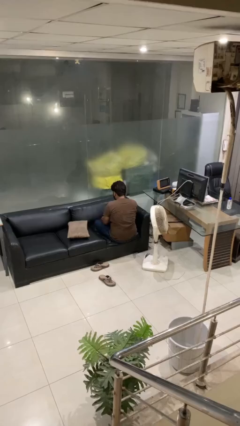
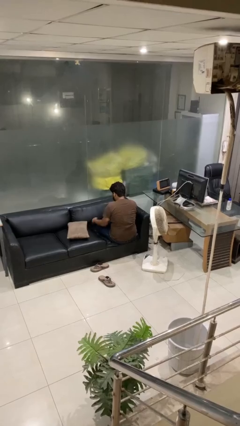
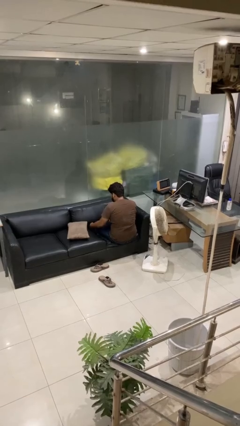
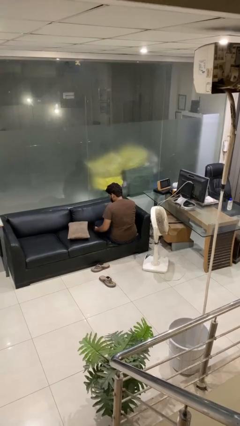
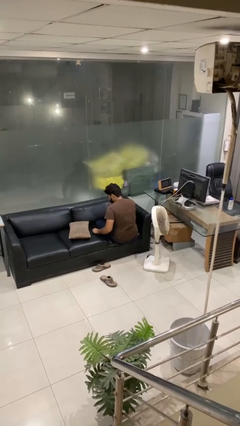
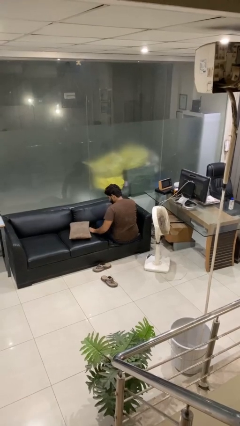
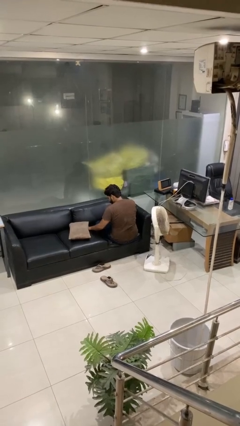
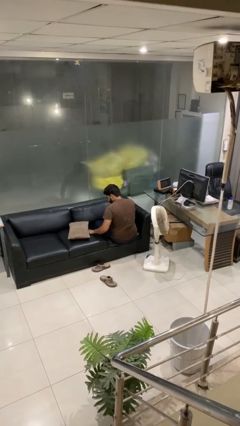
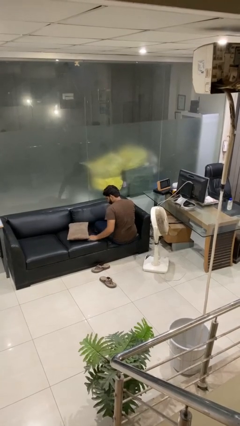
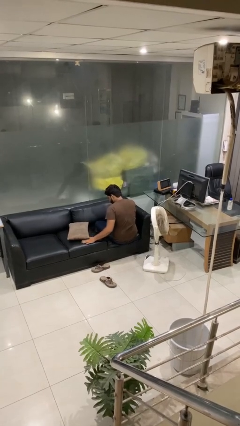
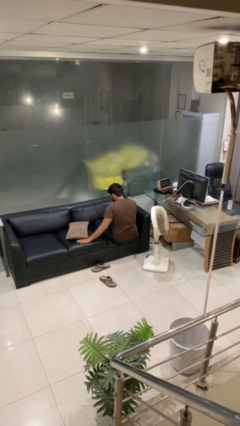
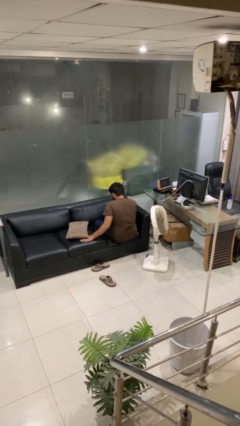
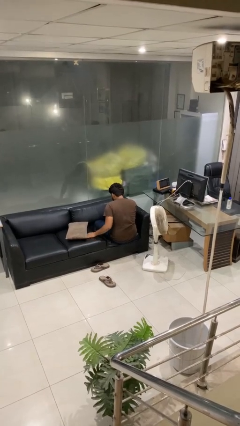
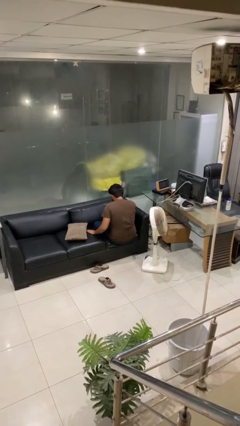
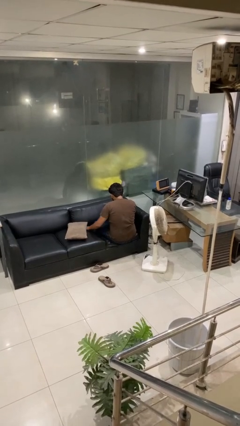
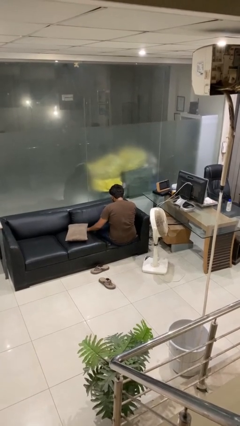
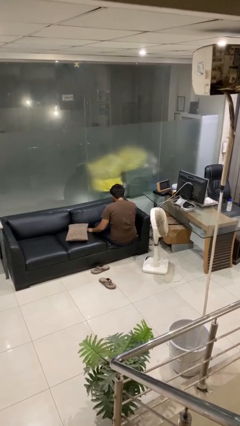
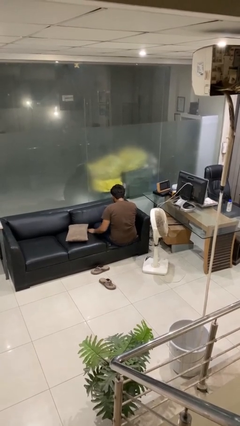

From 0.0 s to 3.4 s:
person searches in couch

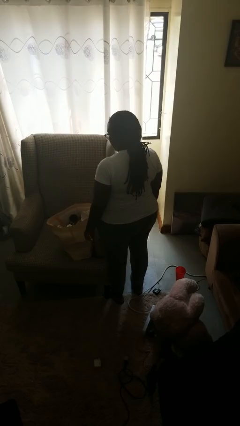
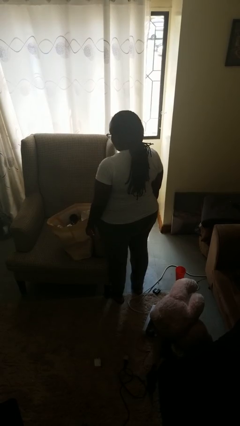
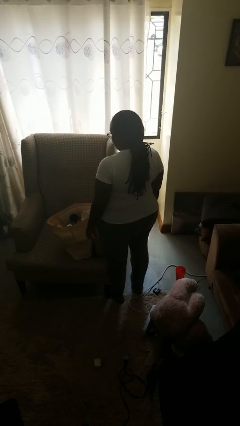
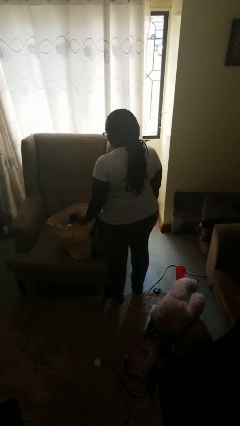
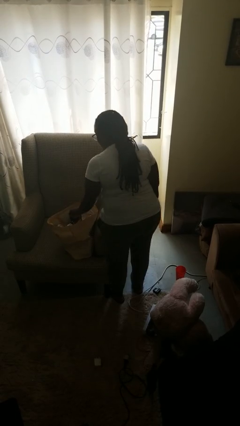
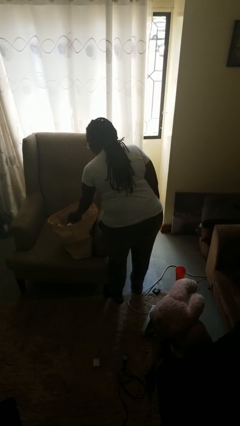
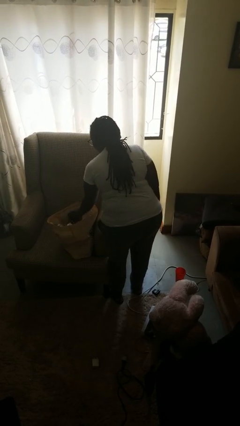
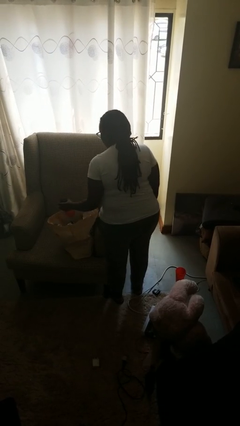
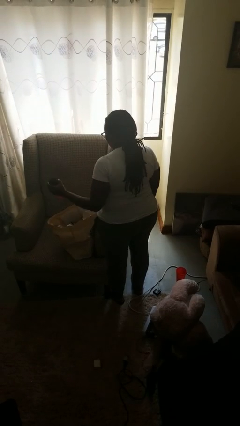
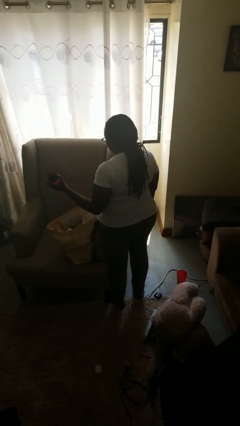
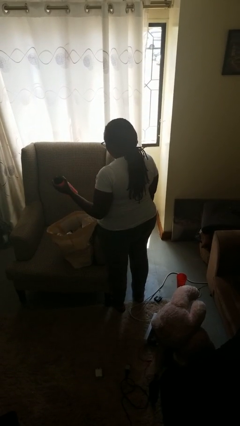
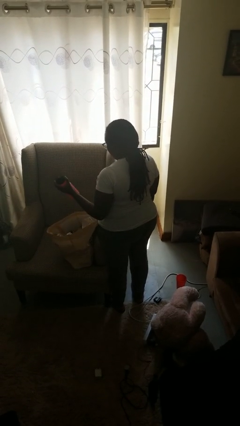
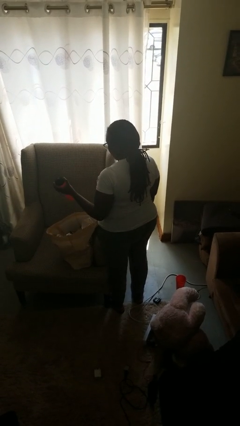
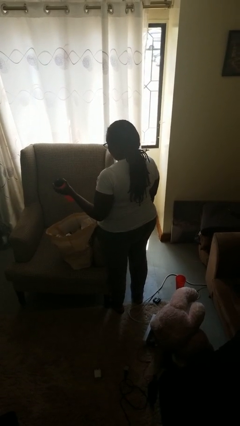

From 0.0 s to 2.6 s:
person takes object from bag

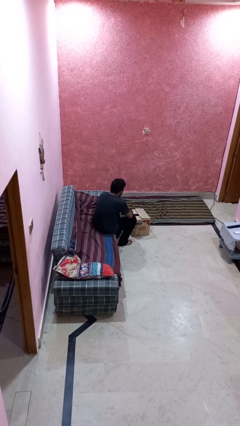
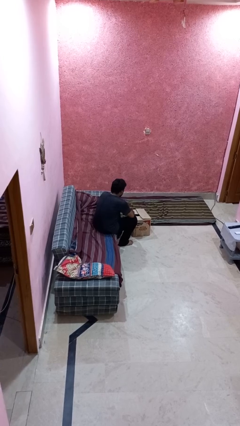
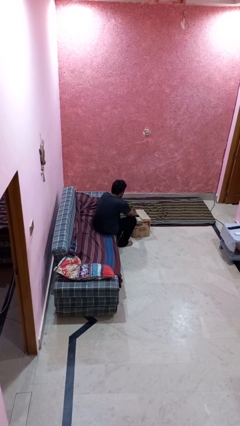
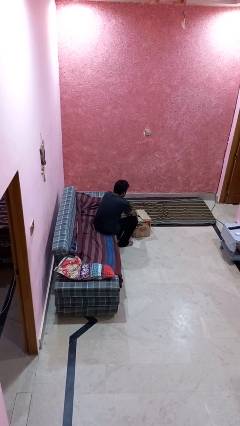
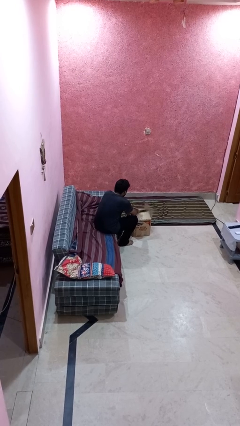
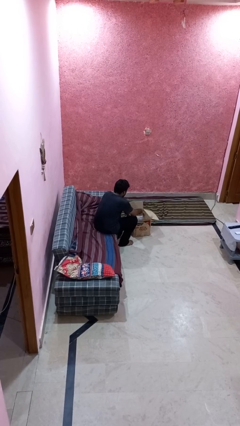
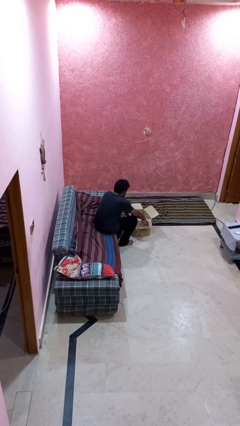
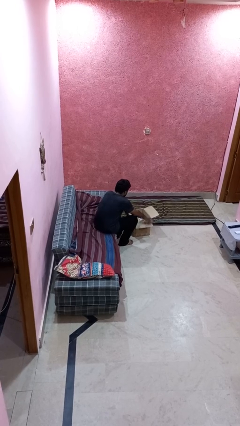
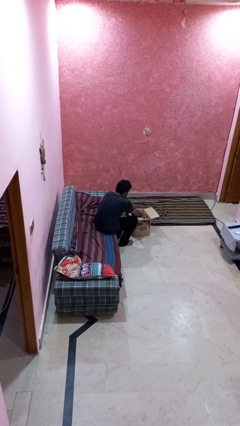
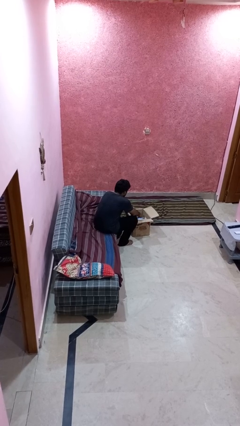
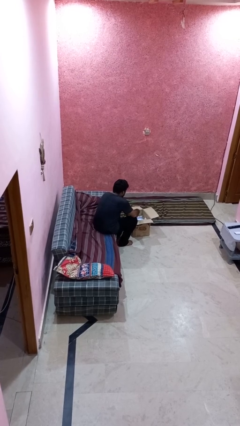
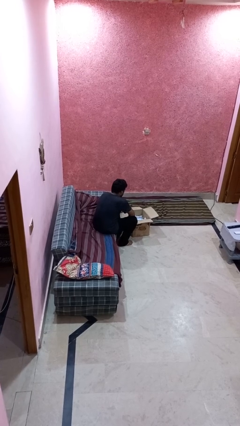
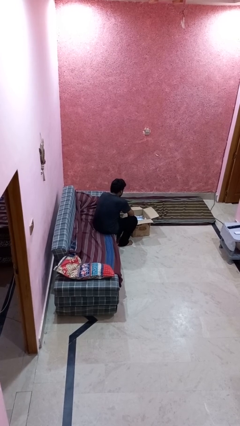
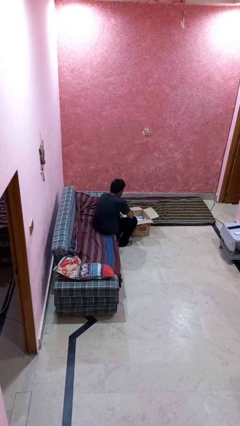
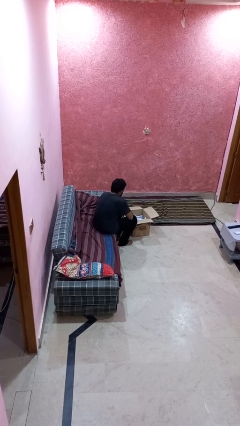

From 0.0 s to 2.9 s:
person opens box

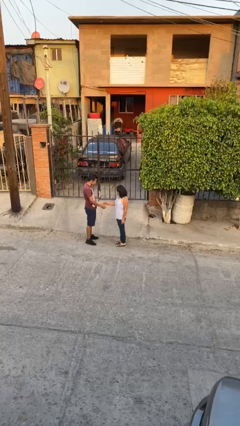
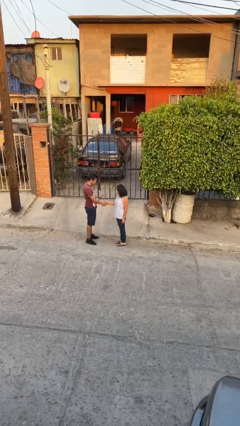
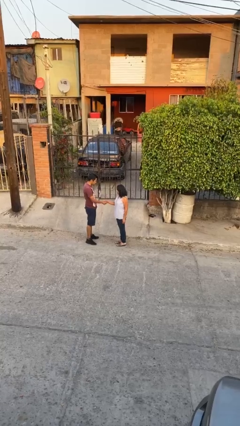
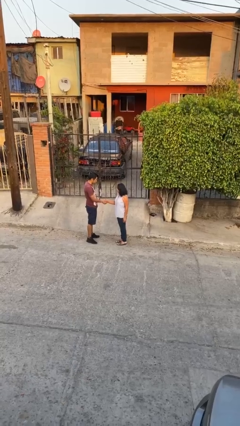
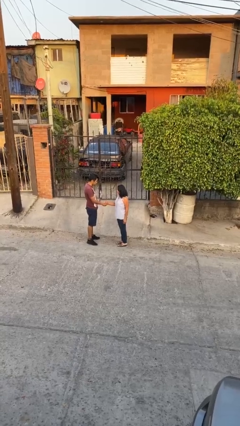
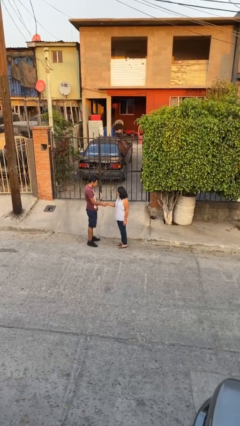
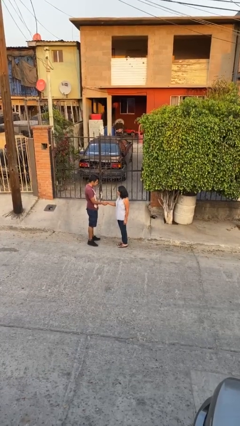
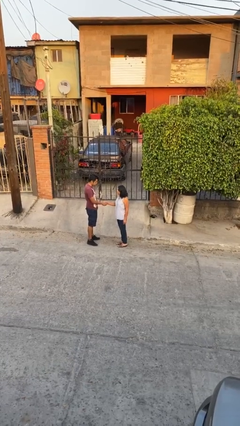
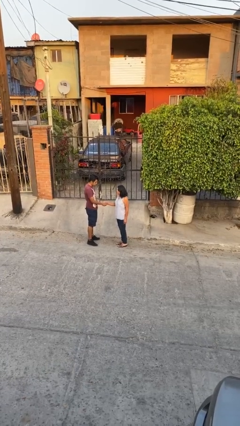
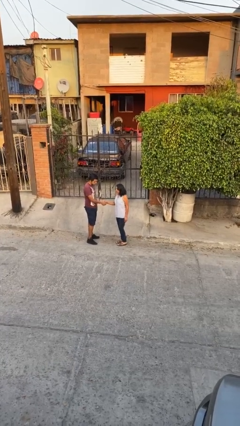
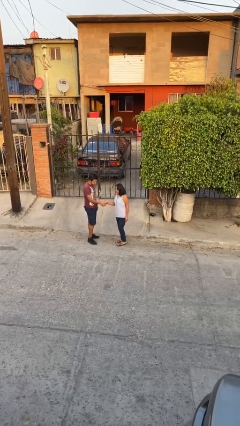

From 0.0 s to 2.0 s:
person shakes hand

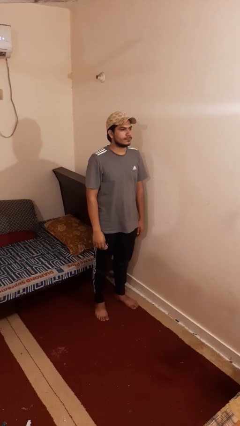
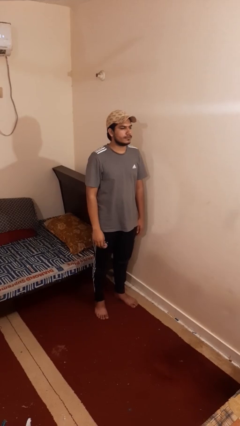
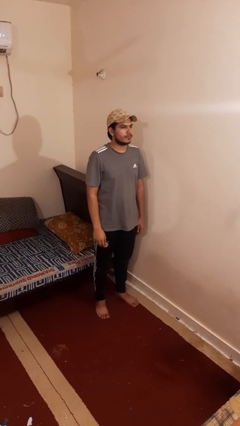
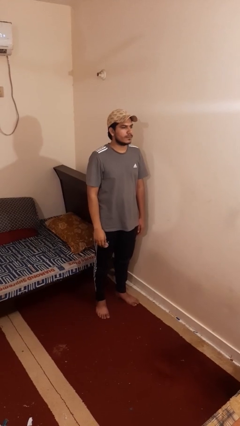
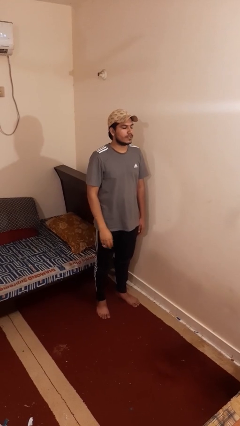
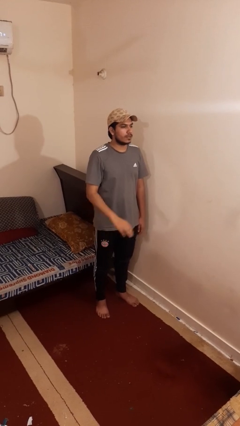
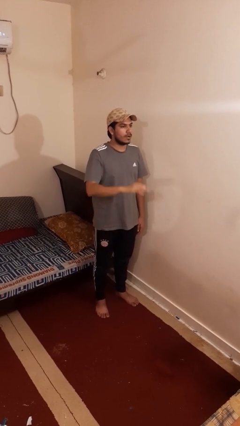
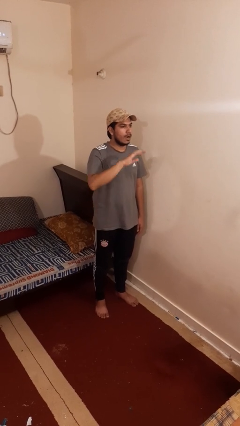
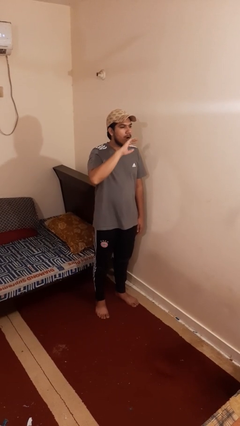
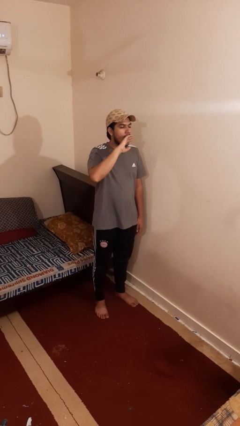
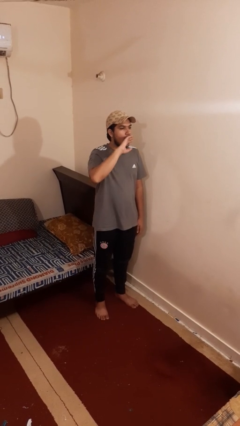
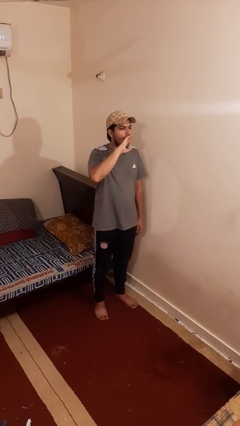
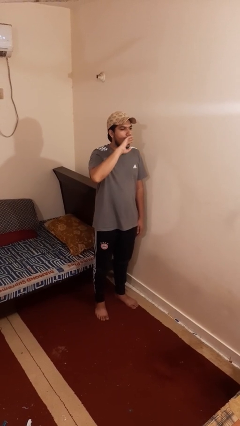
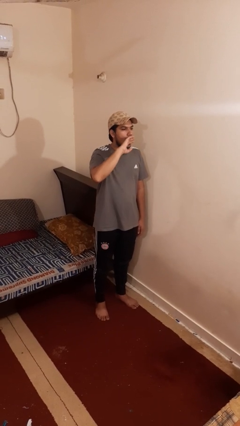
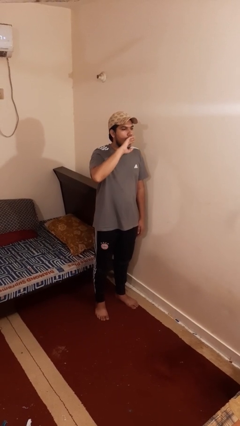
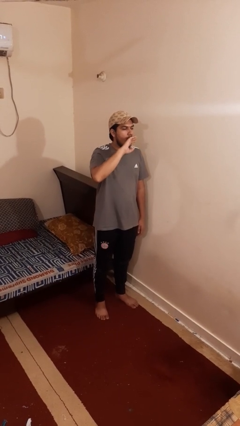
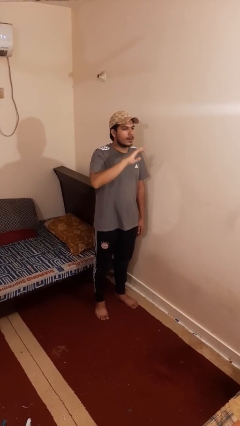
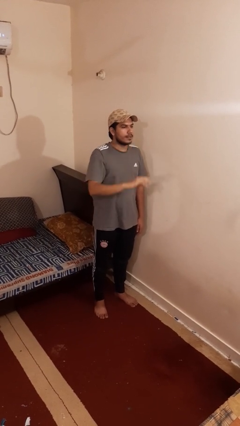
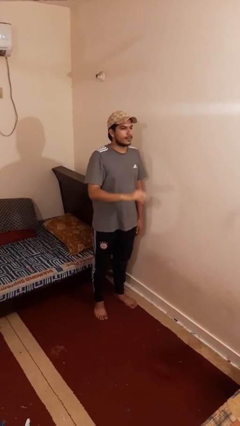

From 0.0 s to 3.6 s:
person yawns

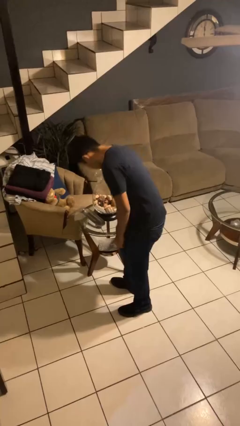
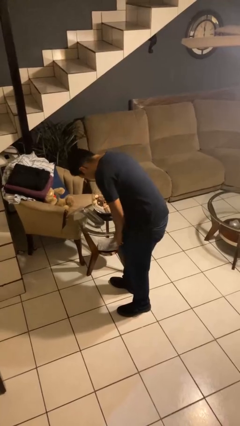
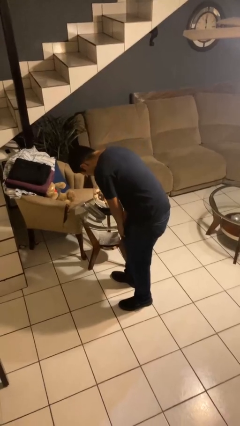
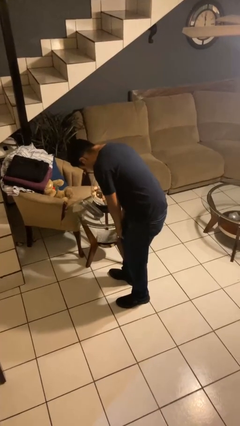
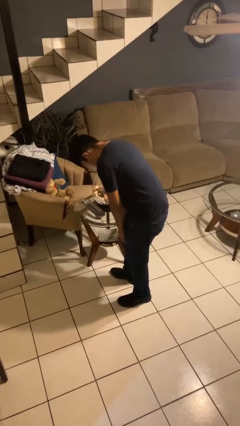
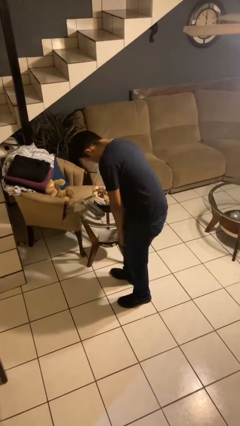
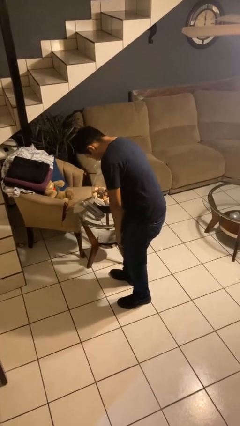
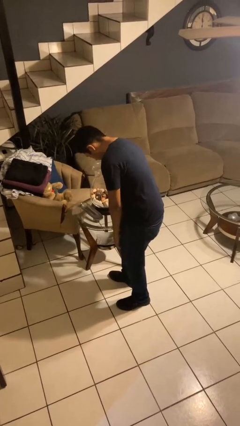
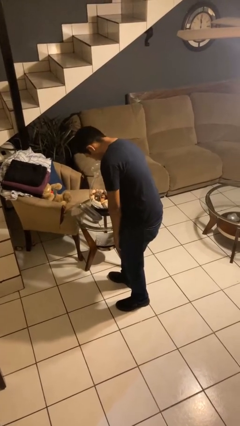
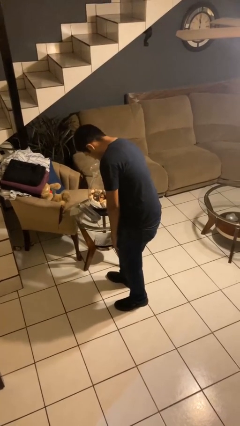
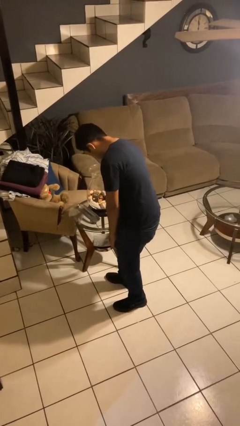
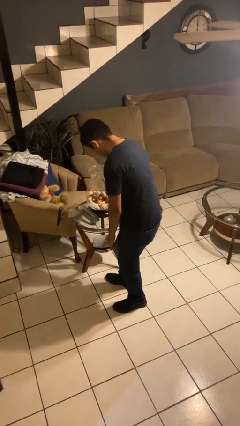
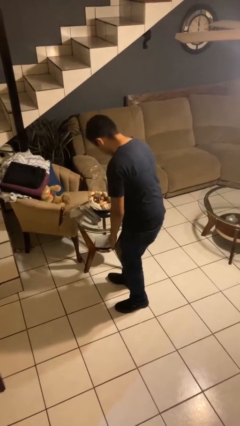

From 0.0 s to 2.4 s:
person bumps into table

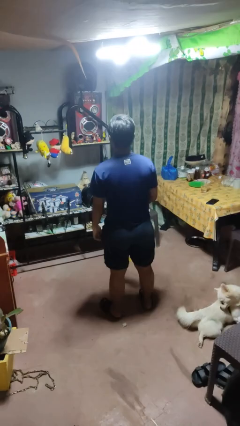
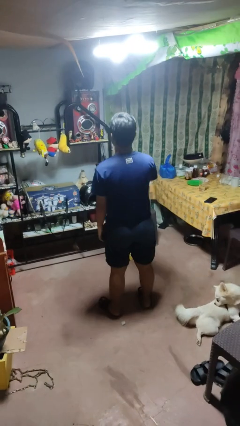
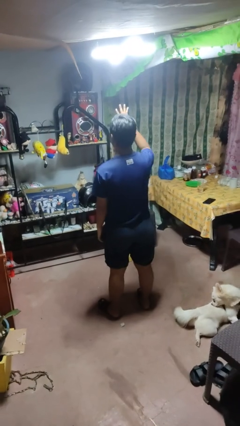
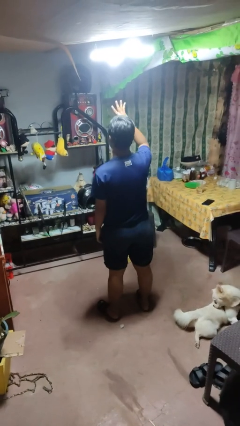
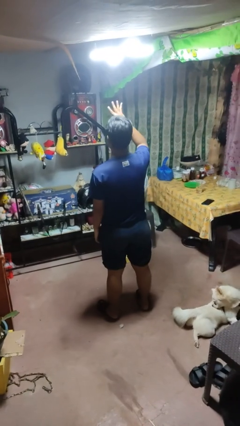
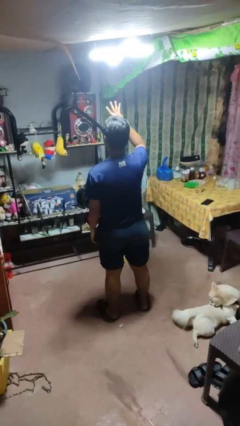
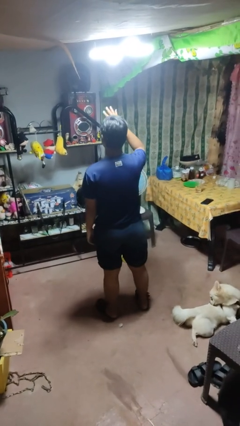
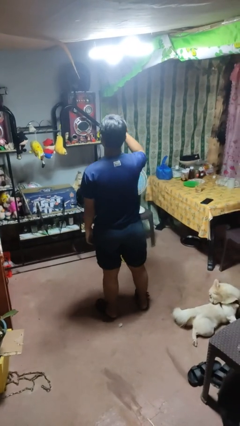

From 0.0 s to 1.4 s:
person gestures number four
